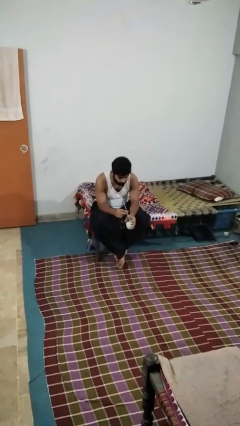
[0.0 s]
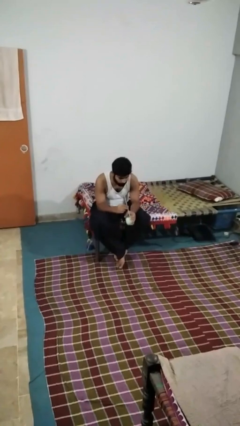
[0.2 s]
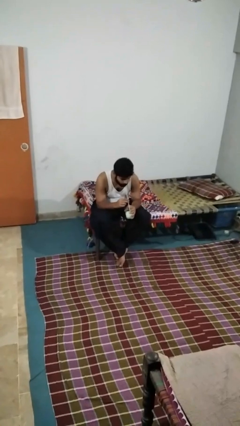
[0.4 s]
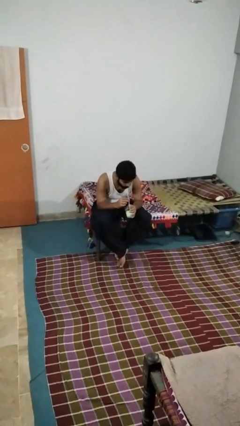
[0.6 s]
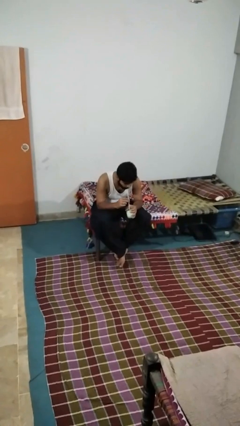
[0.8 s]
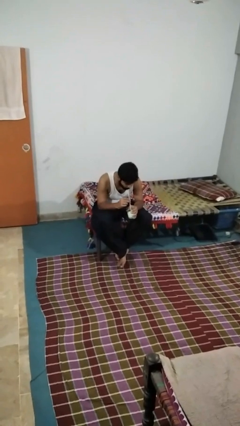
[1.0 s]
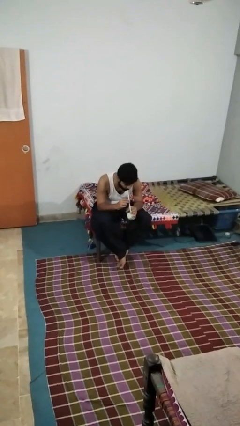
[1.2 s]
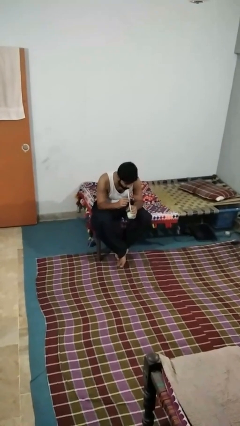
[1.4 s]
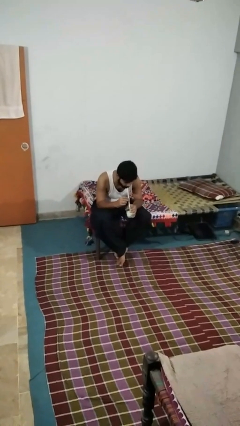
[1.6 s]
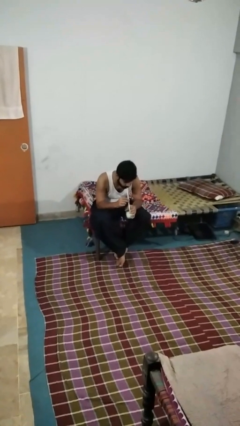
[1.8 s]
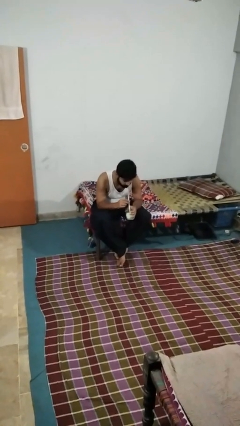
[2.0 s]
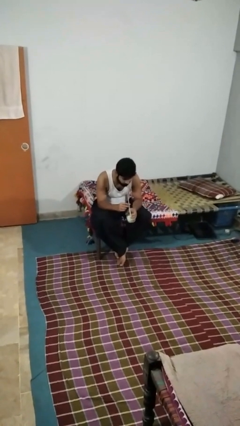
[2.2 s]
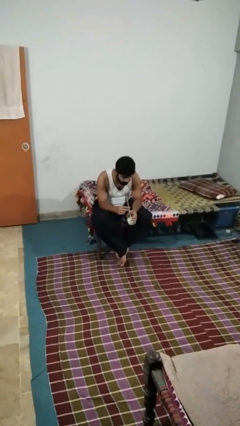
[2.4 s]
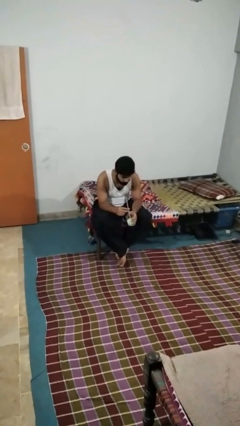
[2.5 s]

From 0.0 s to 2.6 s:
person drinks from straw

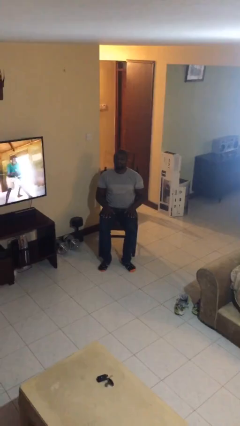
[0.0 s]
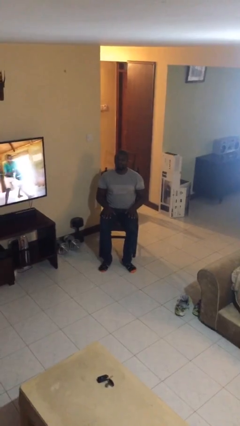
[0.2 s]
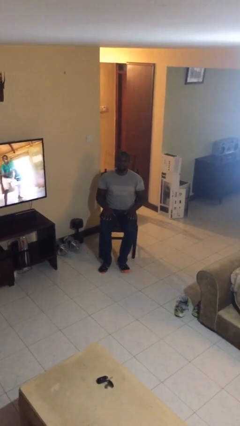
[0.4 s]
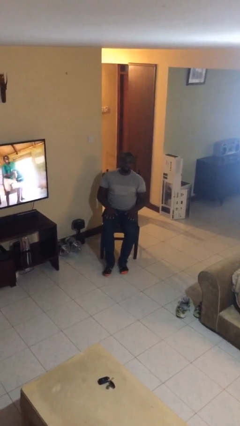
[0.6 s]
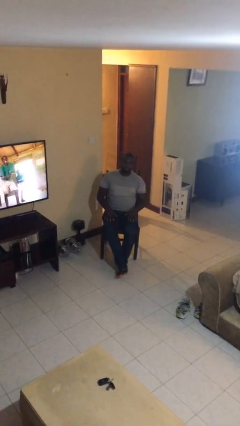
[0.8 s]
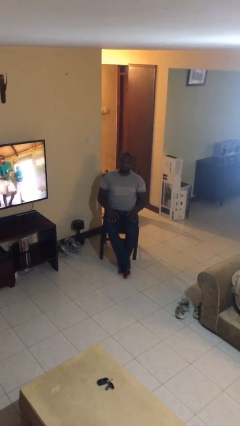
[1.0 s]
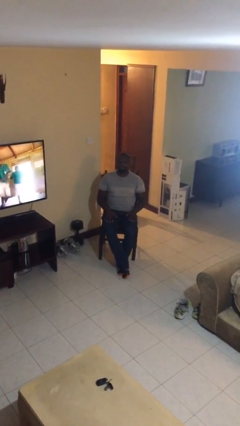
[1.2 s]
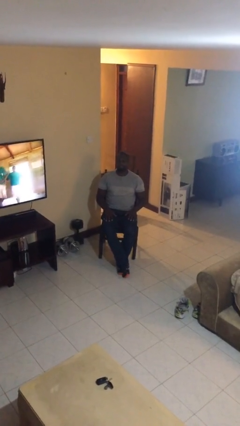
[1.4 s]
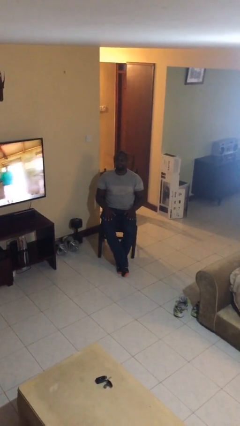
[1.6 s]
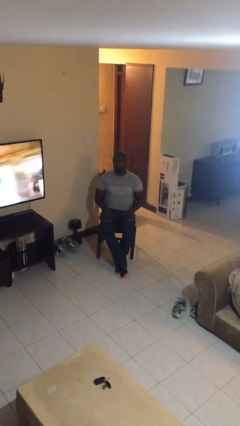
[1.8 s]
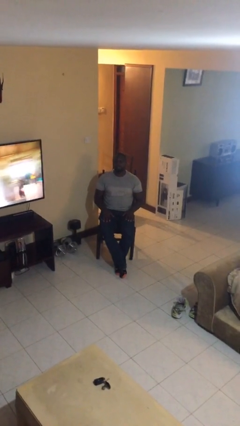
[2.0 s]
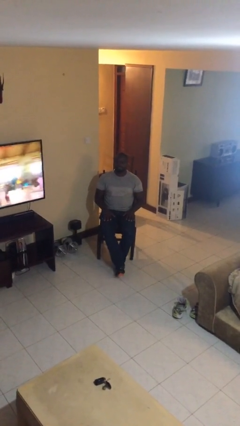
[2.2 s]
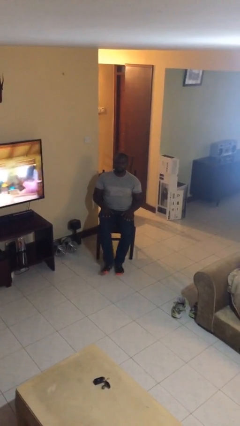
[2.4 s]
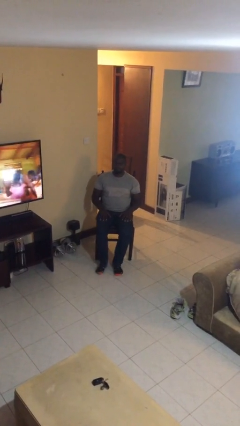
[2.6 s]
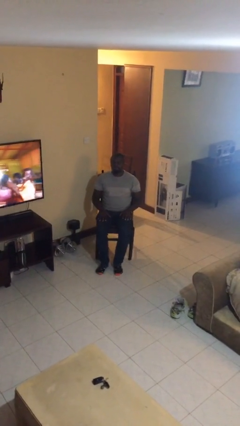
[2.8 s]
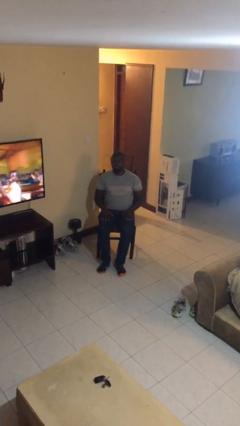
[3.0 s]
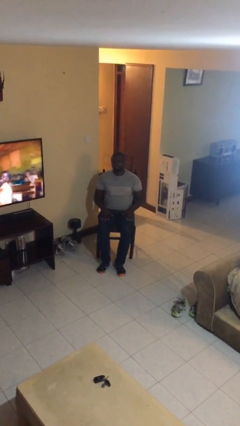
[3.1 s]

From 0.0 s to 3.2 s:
person crosses legs

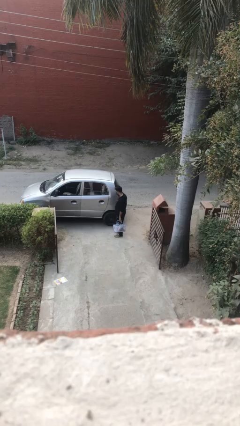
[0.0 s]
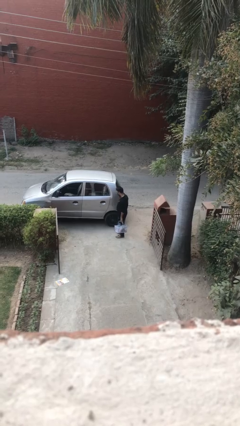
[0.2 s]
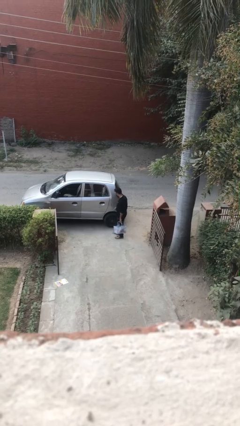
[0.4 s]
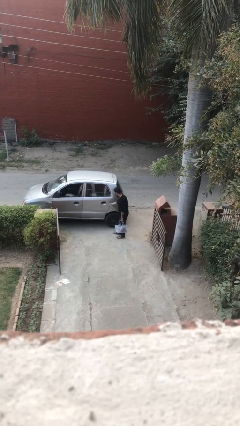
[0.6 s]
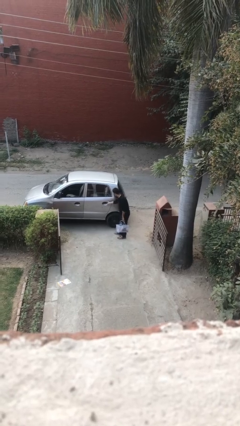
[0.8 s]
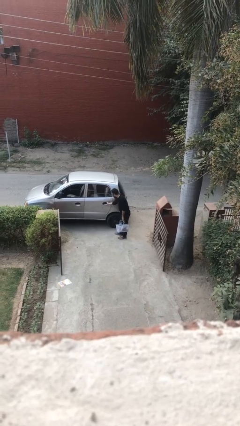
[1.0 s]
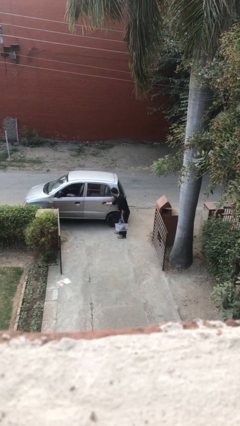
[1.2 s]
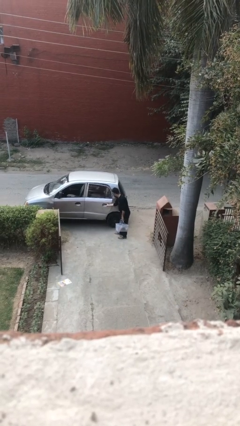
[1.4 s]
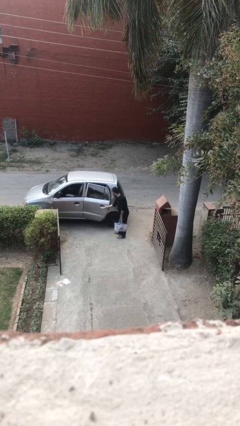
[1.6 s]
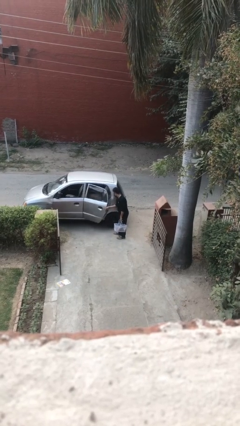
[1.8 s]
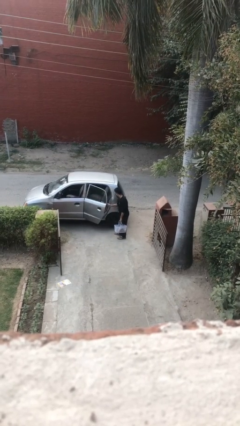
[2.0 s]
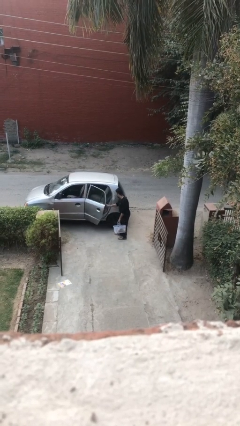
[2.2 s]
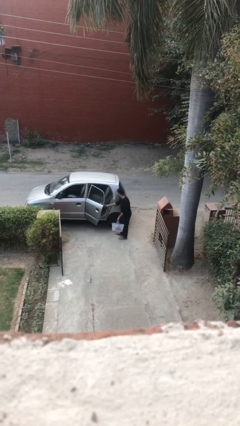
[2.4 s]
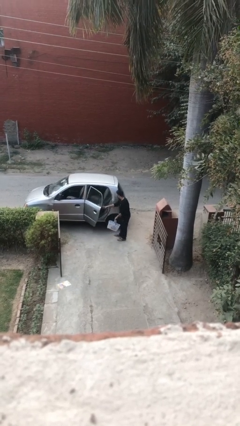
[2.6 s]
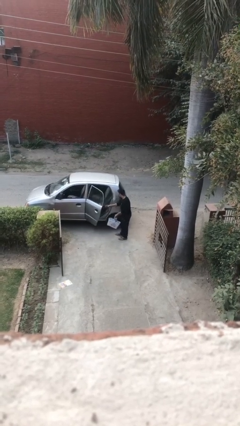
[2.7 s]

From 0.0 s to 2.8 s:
person opens car door

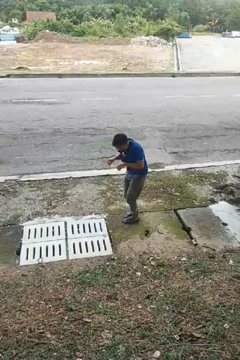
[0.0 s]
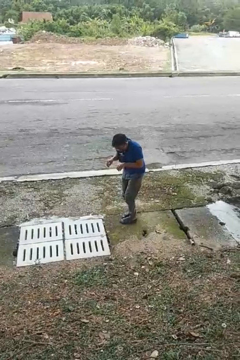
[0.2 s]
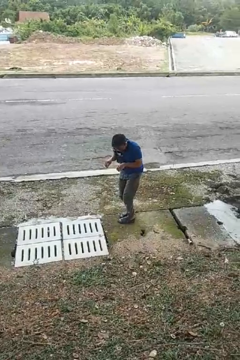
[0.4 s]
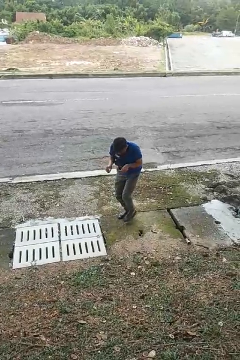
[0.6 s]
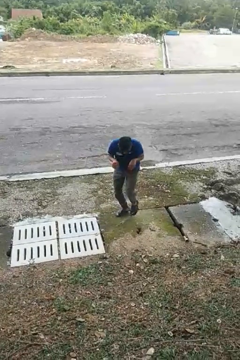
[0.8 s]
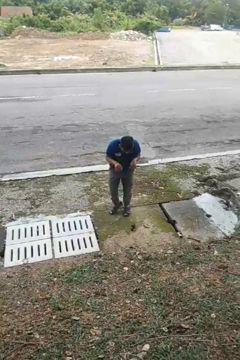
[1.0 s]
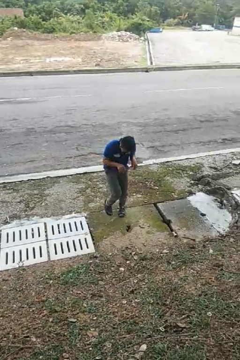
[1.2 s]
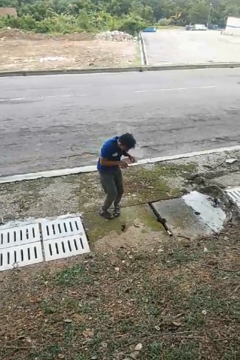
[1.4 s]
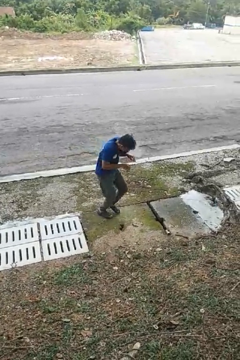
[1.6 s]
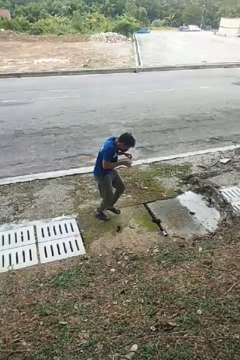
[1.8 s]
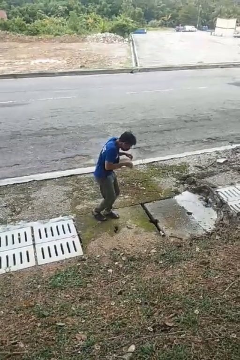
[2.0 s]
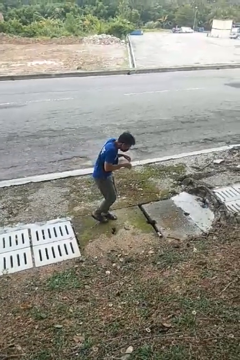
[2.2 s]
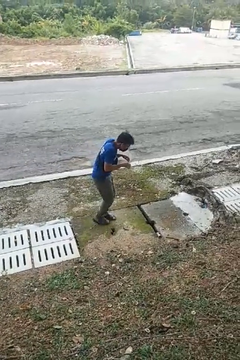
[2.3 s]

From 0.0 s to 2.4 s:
person walks tiptoe

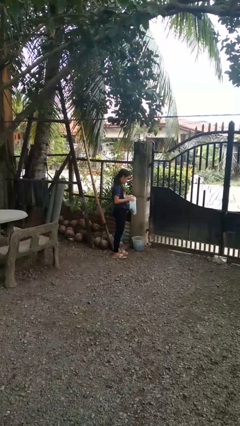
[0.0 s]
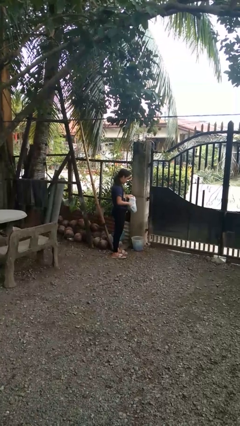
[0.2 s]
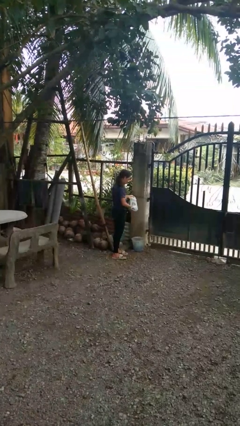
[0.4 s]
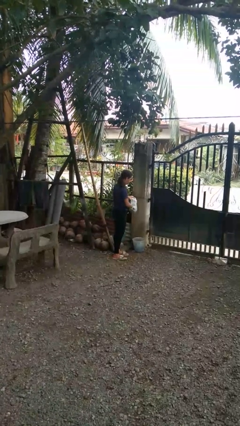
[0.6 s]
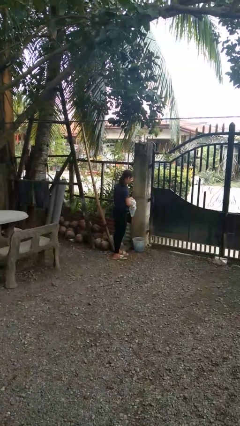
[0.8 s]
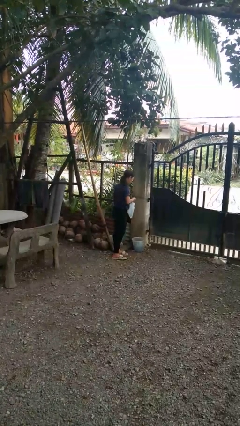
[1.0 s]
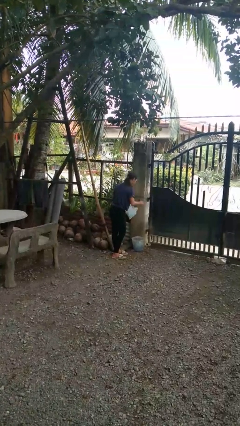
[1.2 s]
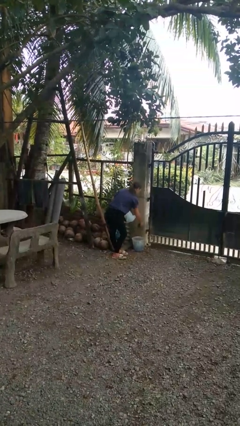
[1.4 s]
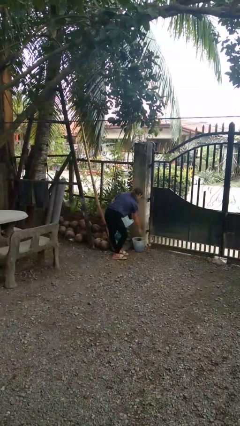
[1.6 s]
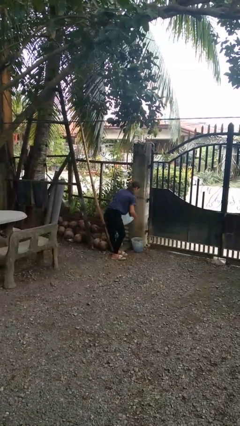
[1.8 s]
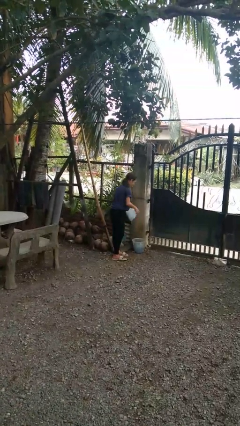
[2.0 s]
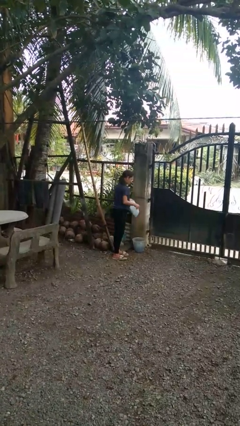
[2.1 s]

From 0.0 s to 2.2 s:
person discards trash

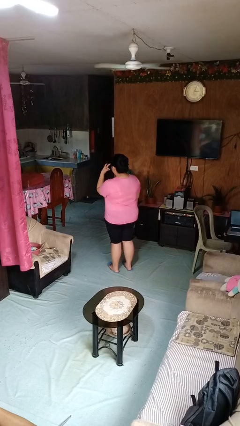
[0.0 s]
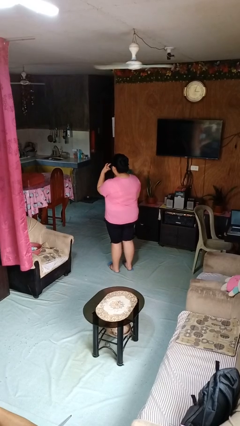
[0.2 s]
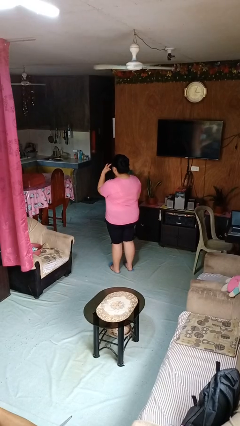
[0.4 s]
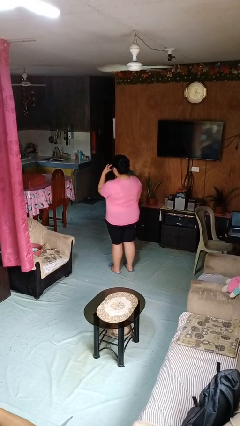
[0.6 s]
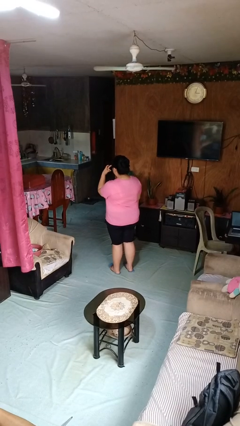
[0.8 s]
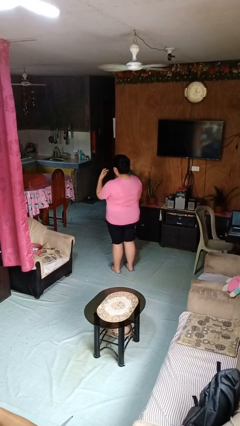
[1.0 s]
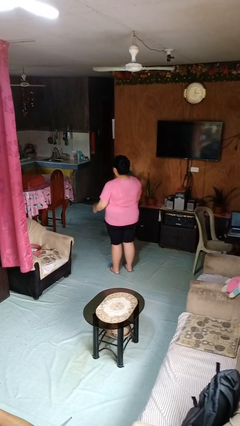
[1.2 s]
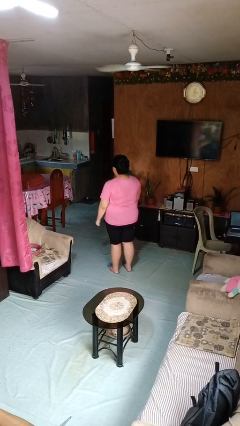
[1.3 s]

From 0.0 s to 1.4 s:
person gestures watch closely

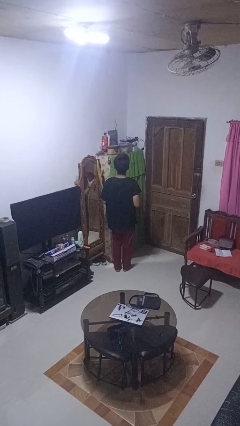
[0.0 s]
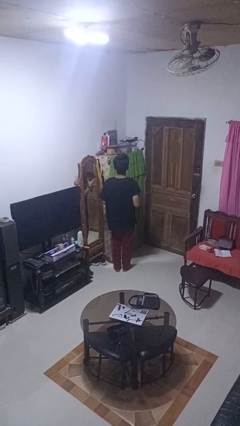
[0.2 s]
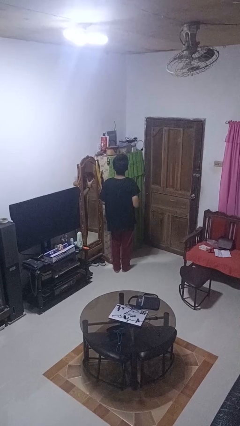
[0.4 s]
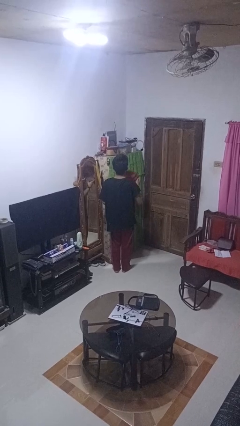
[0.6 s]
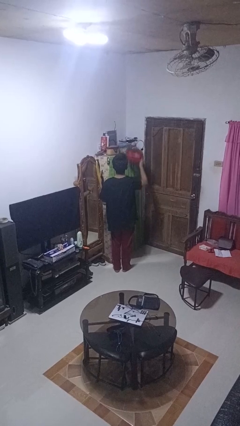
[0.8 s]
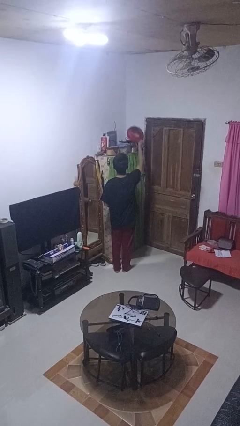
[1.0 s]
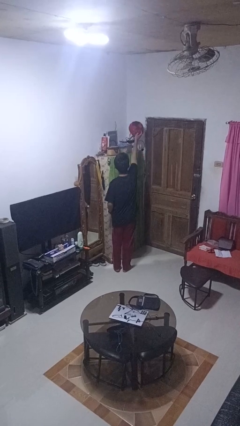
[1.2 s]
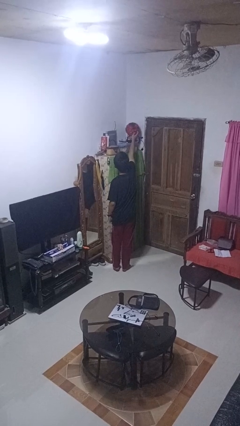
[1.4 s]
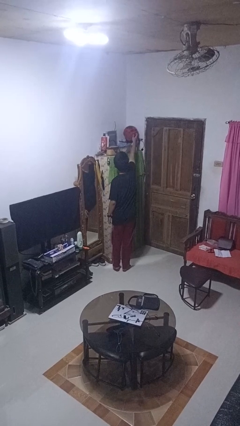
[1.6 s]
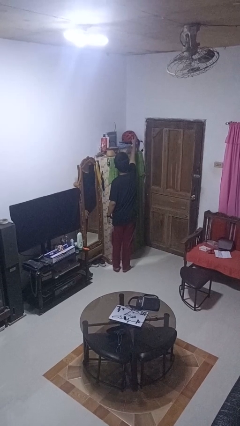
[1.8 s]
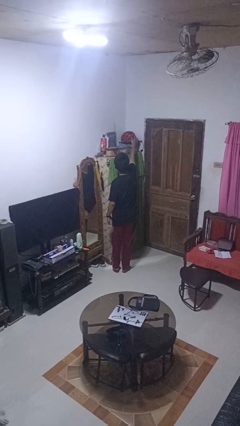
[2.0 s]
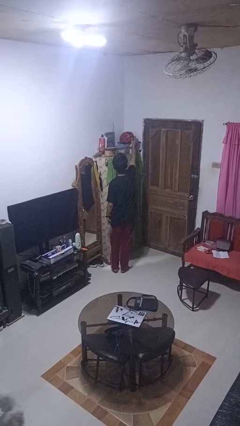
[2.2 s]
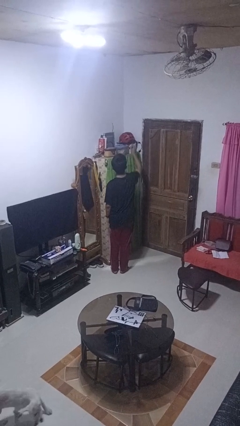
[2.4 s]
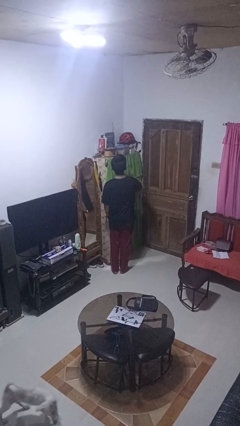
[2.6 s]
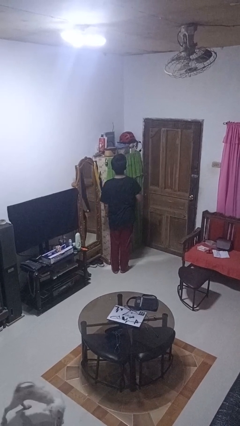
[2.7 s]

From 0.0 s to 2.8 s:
person puts down object on shelf
